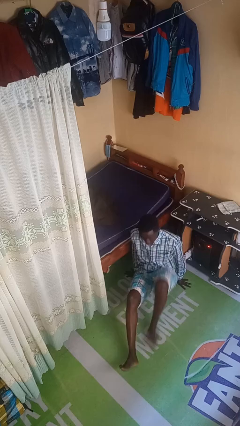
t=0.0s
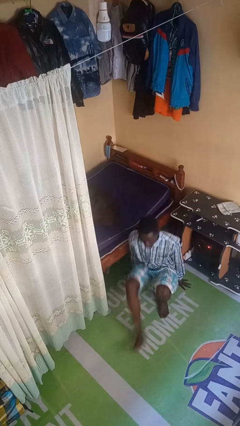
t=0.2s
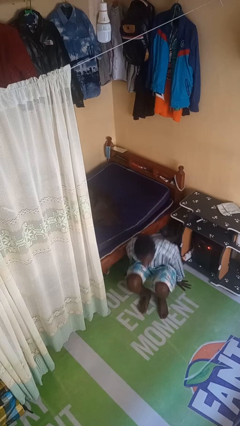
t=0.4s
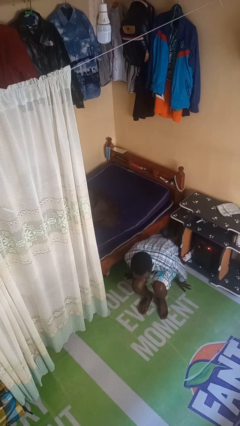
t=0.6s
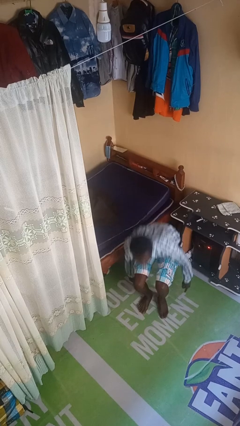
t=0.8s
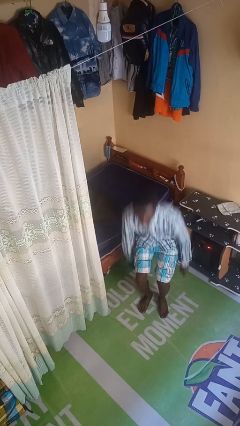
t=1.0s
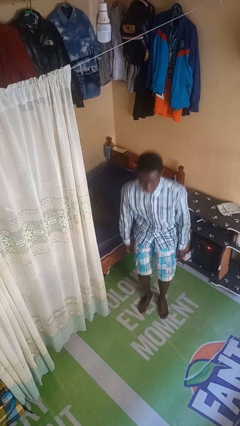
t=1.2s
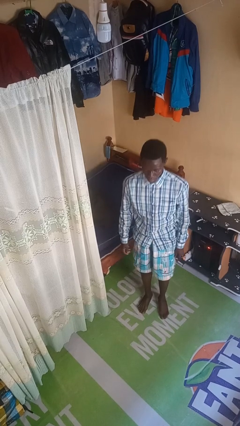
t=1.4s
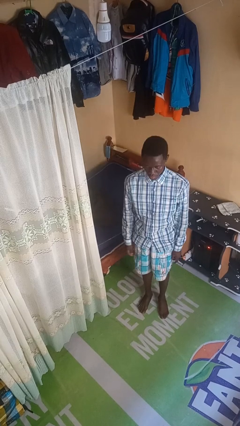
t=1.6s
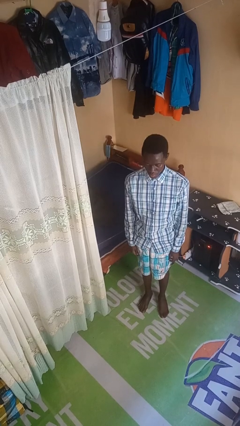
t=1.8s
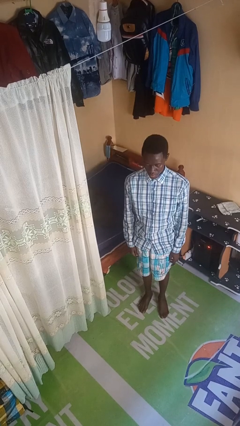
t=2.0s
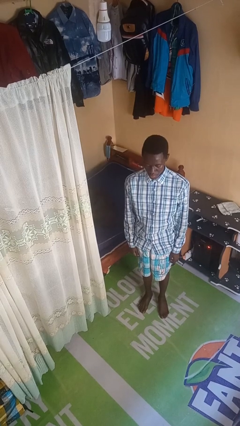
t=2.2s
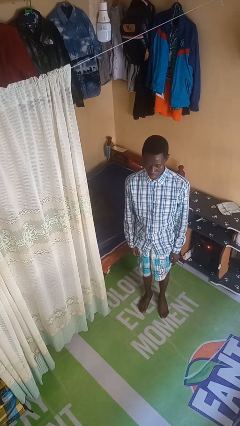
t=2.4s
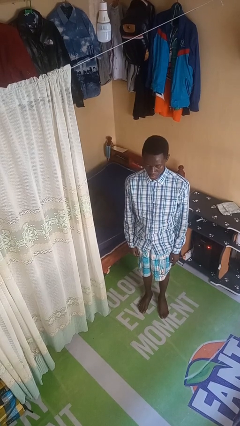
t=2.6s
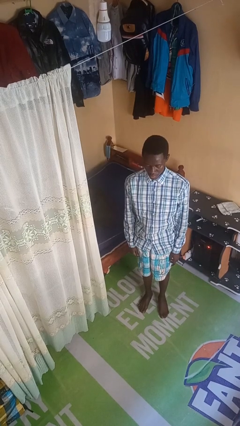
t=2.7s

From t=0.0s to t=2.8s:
person stands up from floor

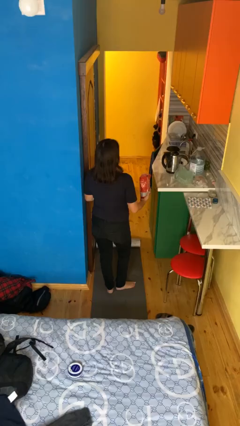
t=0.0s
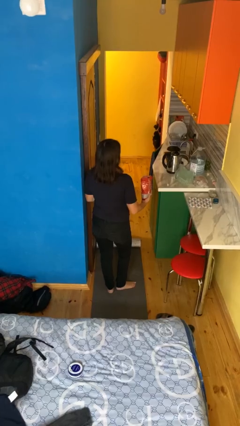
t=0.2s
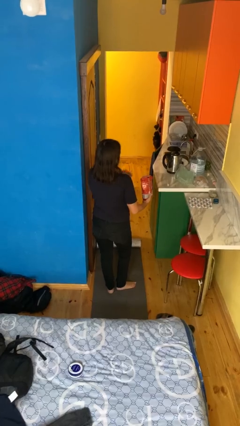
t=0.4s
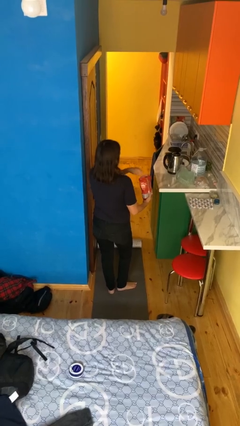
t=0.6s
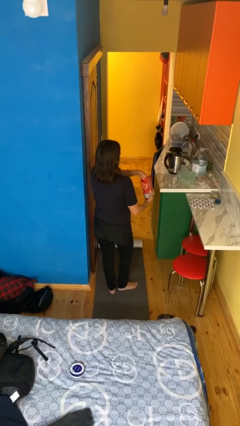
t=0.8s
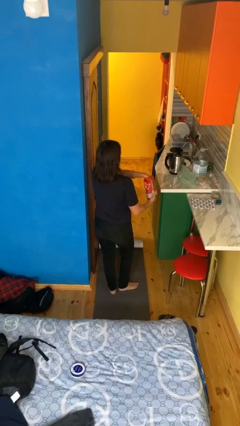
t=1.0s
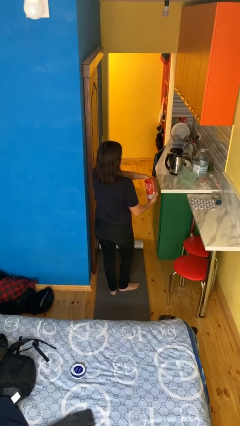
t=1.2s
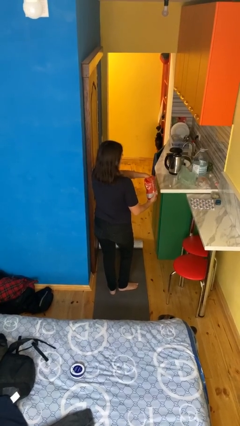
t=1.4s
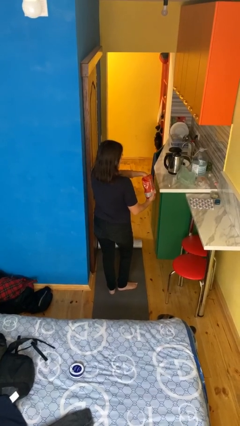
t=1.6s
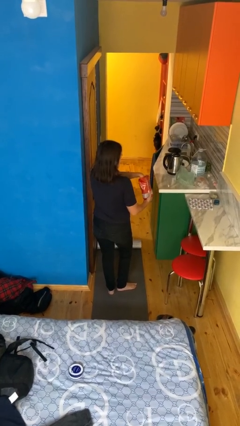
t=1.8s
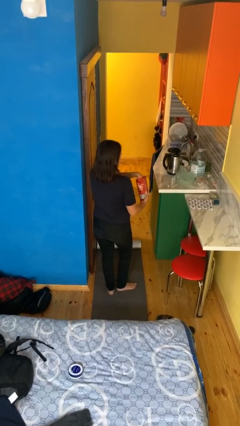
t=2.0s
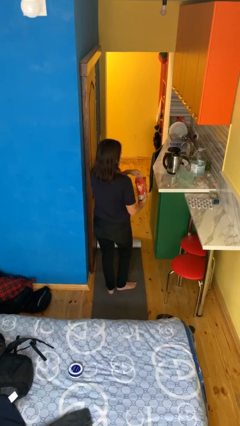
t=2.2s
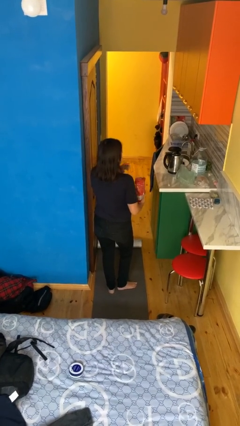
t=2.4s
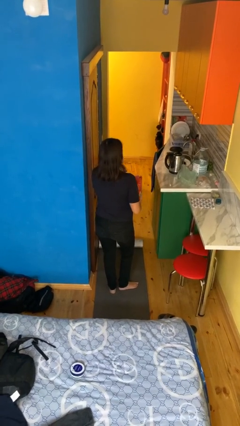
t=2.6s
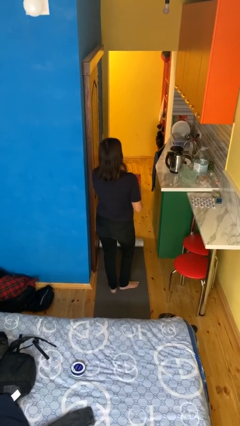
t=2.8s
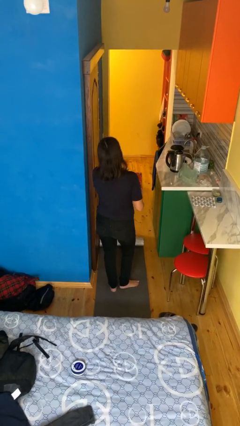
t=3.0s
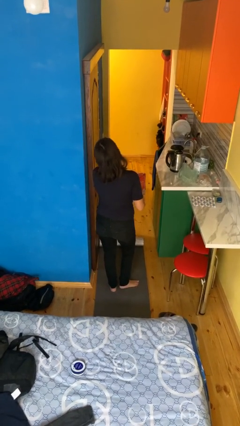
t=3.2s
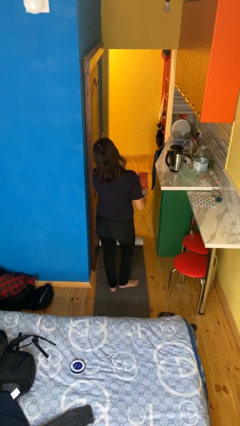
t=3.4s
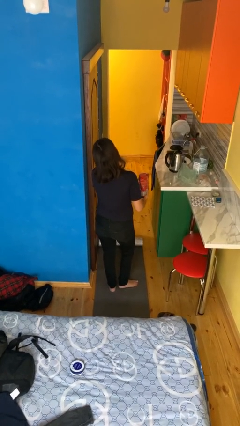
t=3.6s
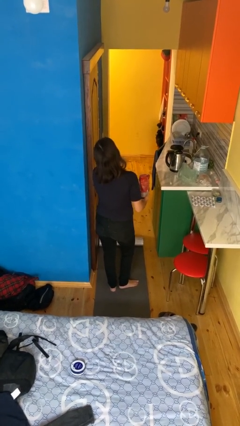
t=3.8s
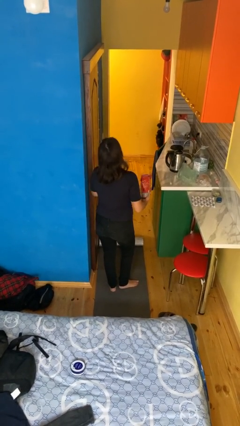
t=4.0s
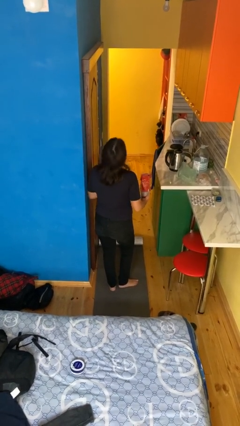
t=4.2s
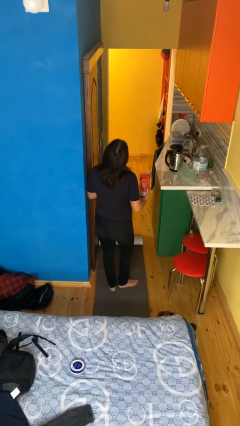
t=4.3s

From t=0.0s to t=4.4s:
person eats snack from bag

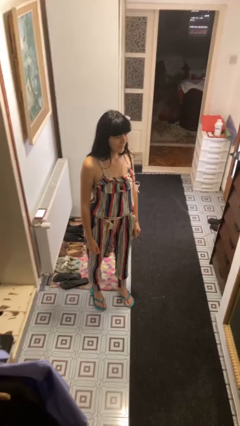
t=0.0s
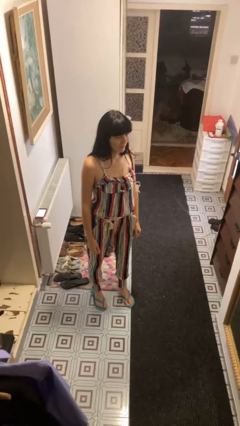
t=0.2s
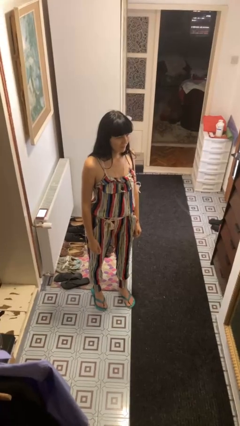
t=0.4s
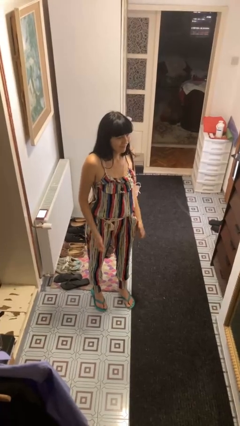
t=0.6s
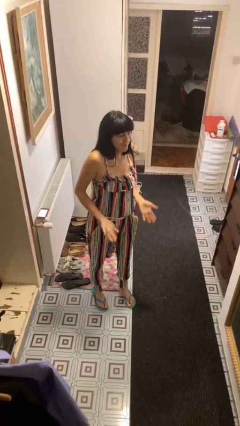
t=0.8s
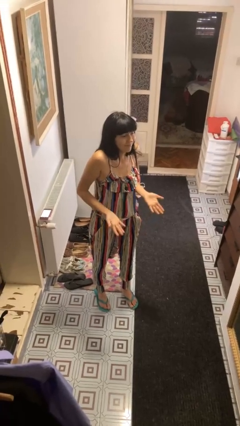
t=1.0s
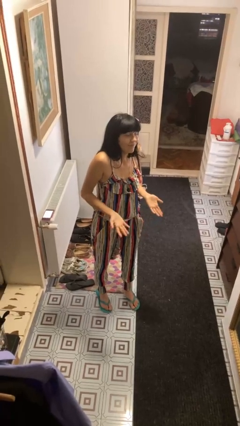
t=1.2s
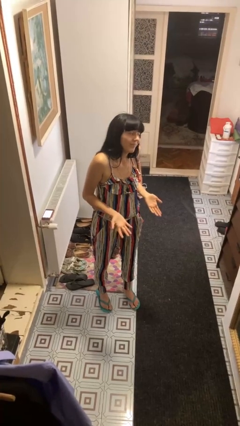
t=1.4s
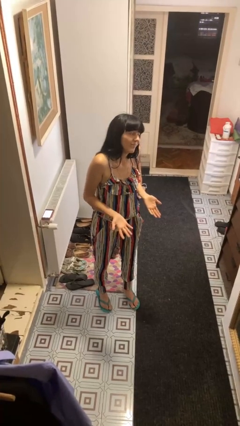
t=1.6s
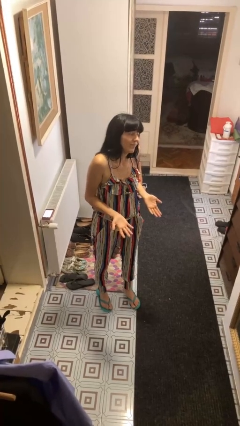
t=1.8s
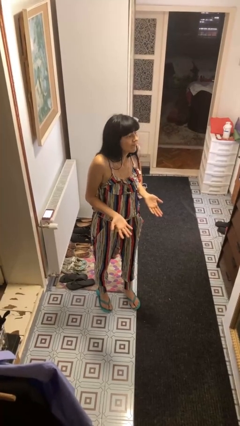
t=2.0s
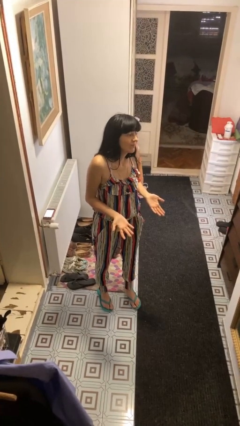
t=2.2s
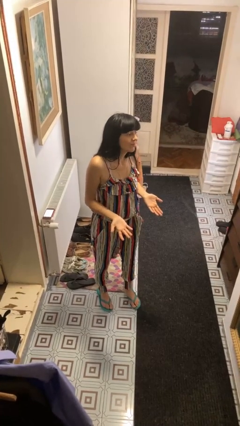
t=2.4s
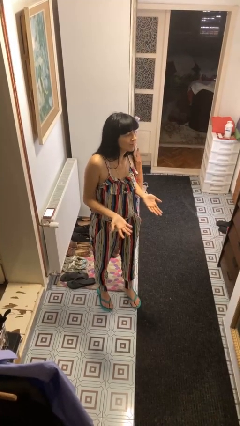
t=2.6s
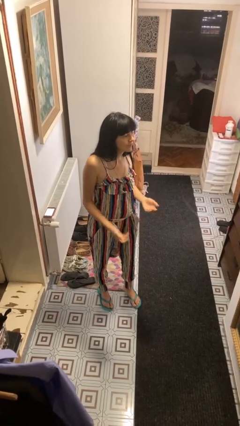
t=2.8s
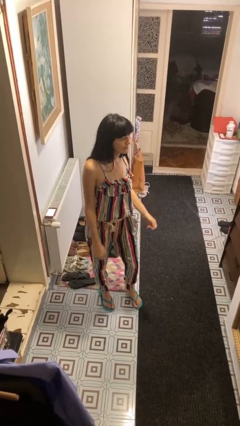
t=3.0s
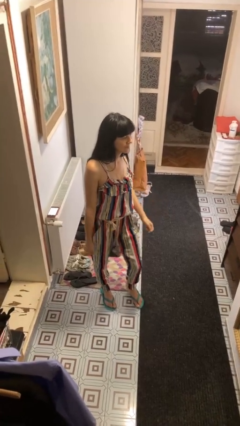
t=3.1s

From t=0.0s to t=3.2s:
person shrugs

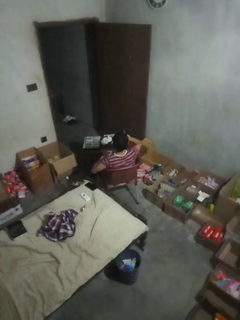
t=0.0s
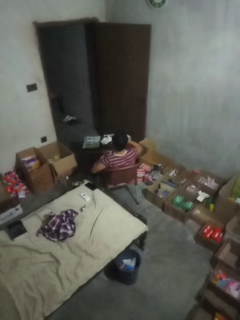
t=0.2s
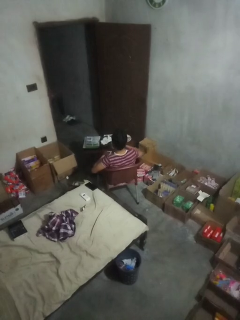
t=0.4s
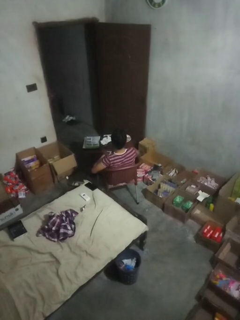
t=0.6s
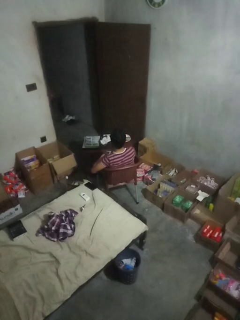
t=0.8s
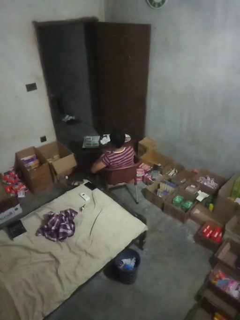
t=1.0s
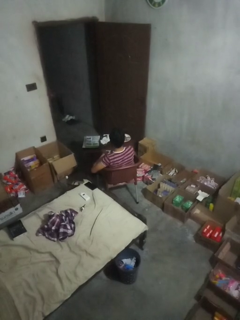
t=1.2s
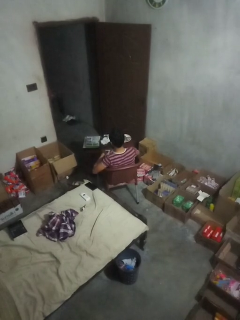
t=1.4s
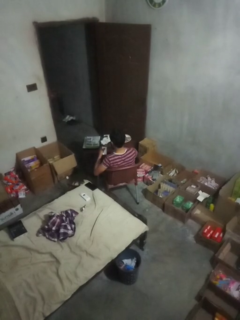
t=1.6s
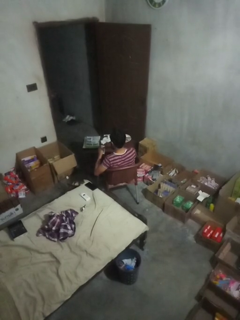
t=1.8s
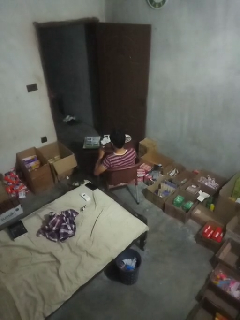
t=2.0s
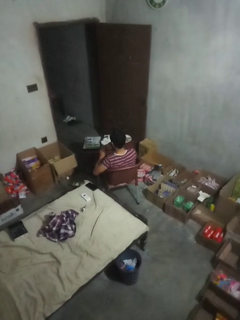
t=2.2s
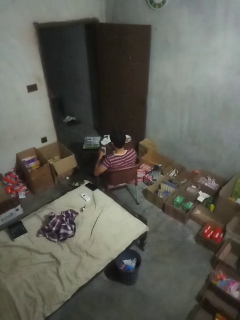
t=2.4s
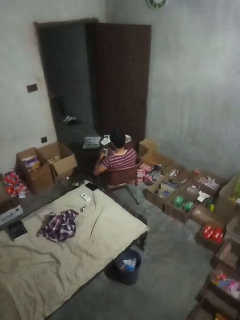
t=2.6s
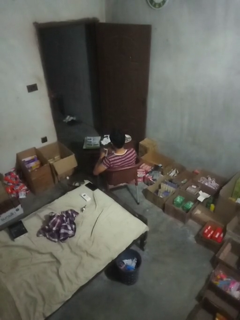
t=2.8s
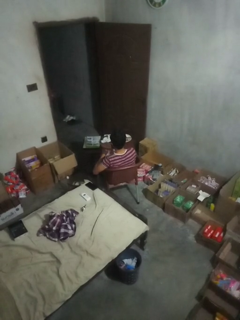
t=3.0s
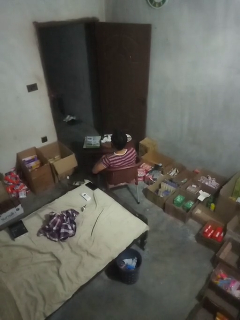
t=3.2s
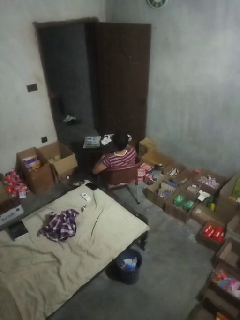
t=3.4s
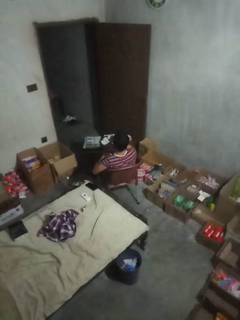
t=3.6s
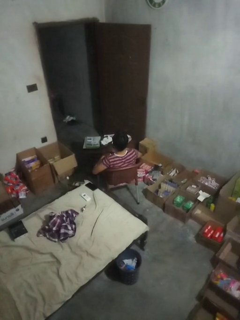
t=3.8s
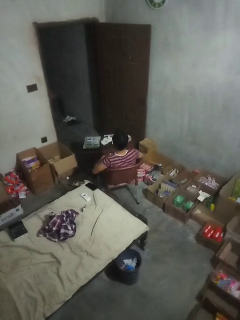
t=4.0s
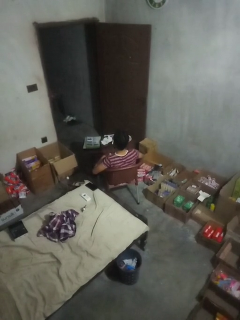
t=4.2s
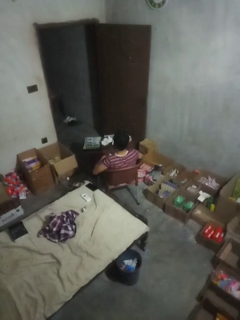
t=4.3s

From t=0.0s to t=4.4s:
person takes medicine pills

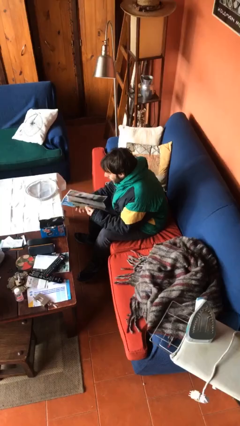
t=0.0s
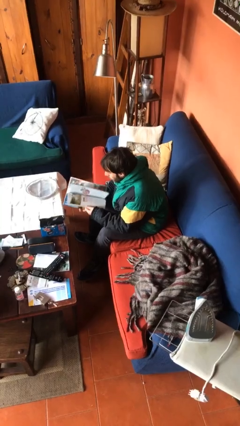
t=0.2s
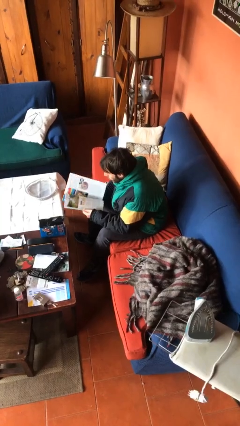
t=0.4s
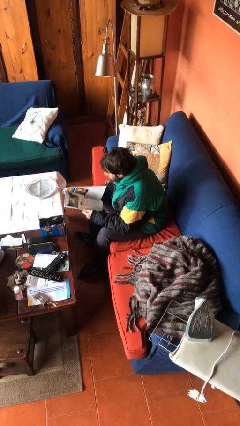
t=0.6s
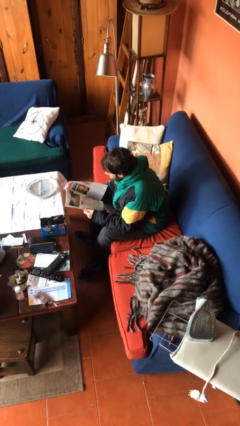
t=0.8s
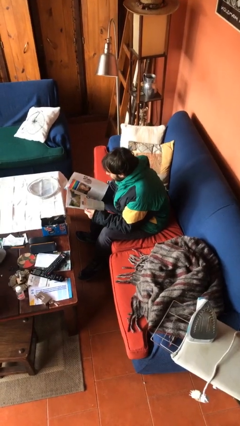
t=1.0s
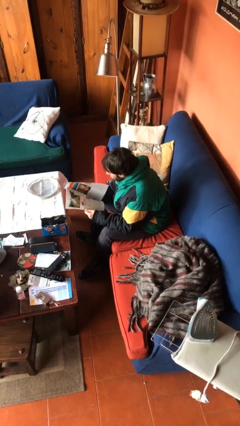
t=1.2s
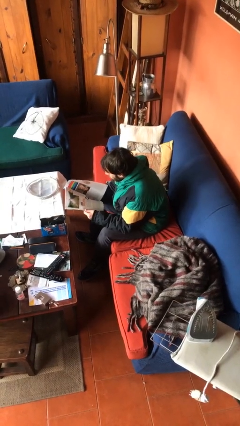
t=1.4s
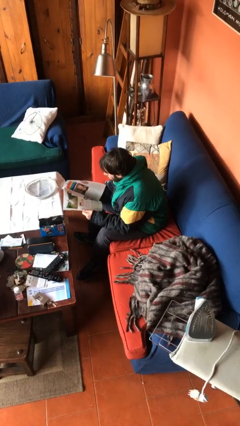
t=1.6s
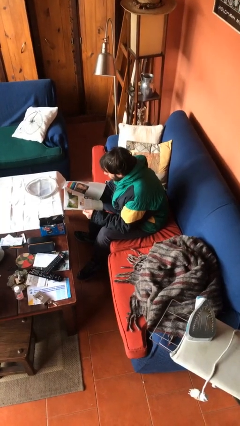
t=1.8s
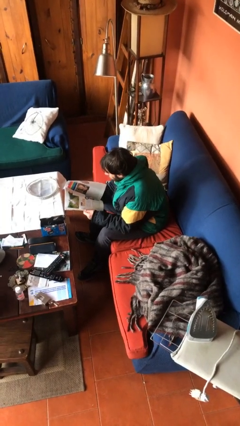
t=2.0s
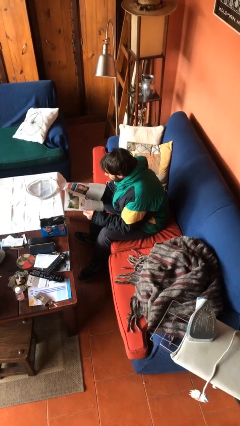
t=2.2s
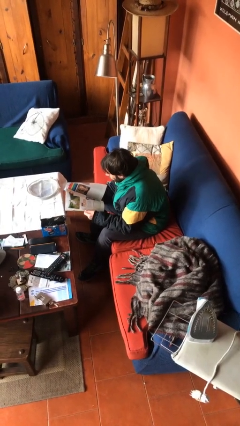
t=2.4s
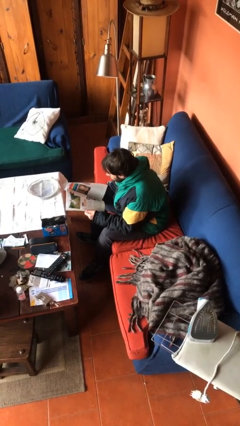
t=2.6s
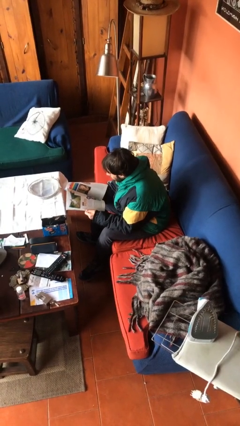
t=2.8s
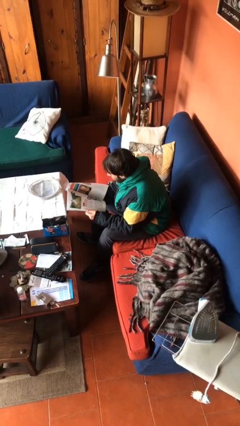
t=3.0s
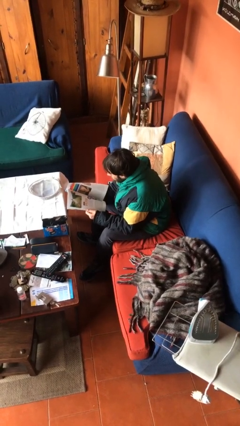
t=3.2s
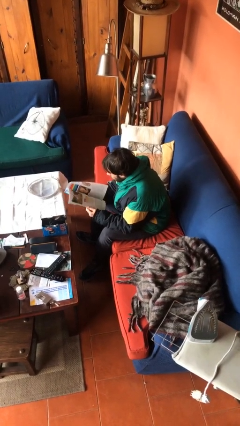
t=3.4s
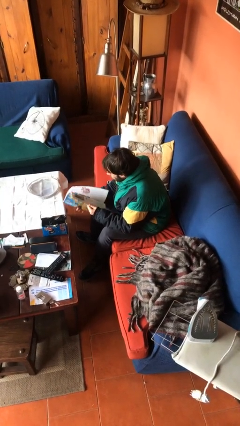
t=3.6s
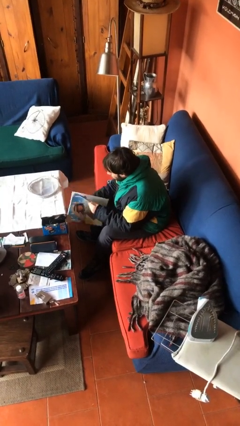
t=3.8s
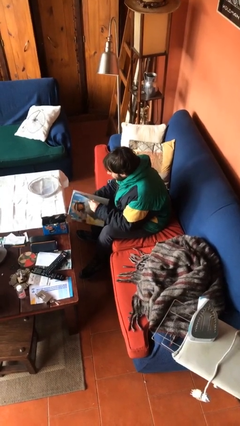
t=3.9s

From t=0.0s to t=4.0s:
person reads magazine
